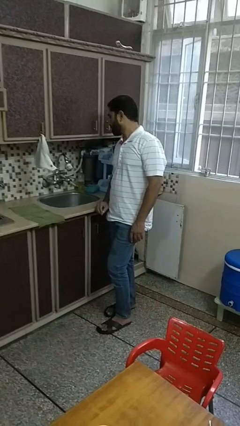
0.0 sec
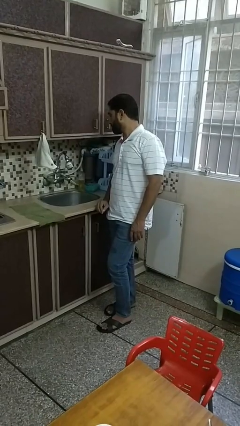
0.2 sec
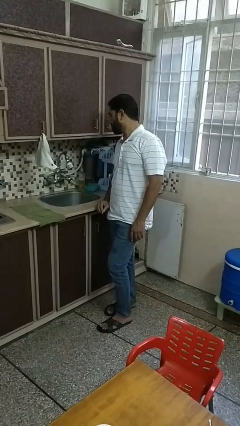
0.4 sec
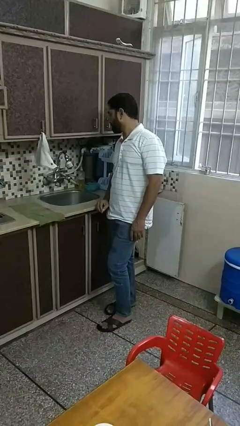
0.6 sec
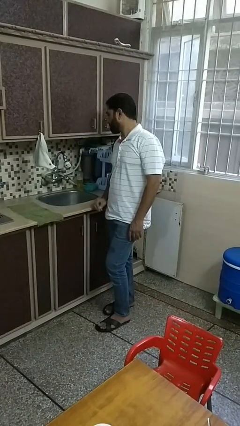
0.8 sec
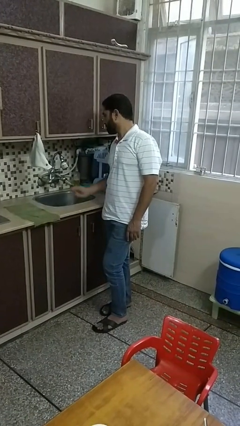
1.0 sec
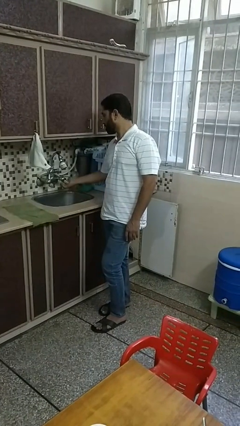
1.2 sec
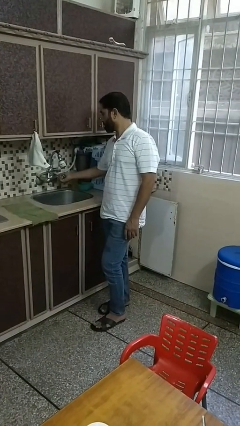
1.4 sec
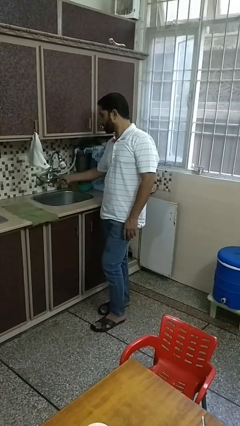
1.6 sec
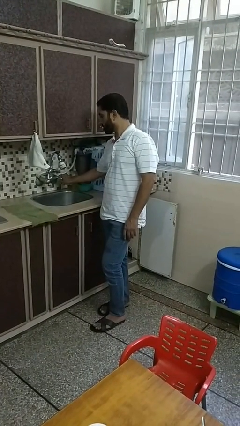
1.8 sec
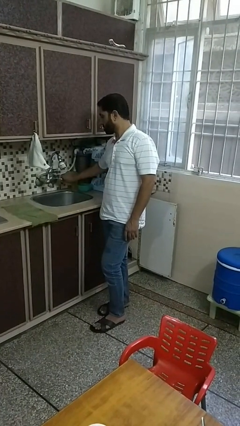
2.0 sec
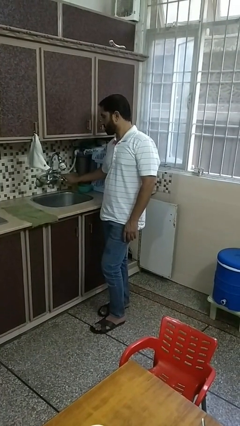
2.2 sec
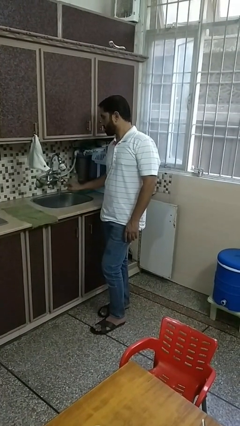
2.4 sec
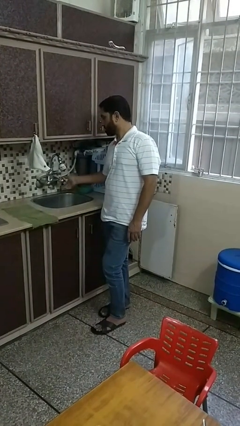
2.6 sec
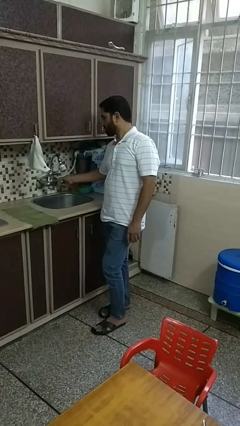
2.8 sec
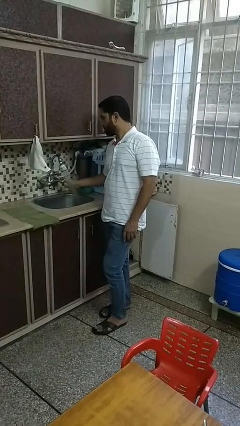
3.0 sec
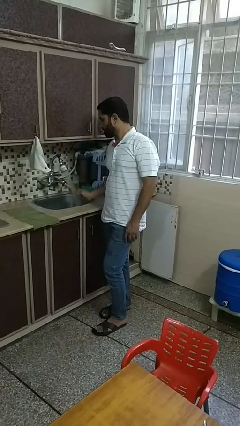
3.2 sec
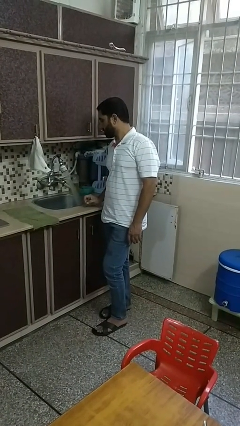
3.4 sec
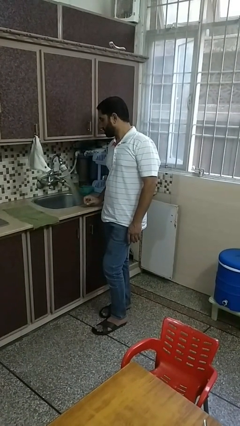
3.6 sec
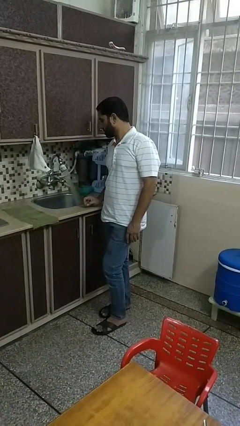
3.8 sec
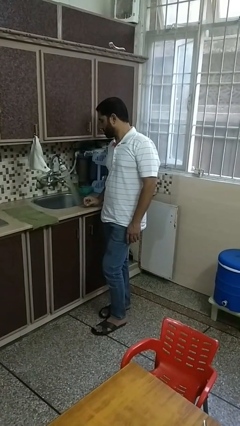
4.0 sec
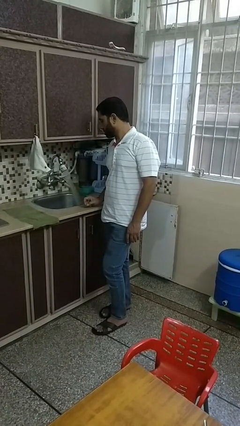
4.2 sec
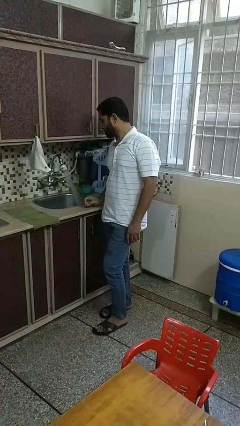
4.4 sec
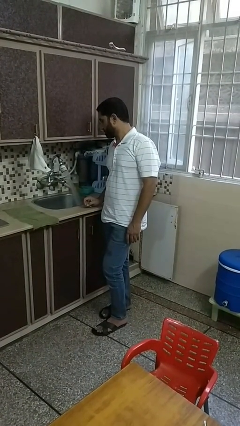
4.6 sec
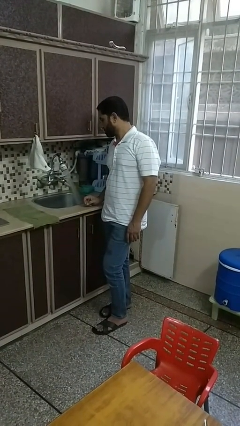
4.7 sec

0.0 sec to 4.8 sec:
person turns on faucet

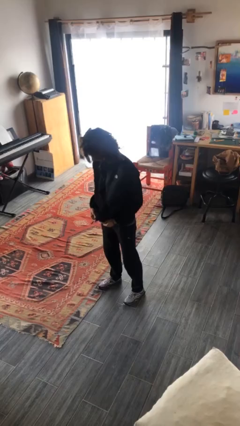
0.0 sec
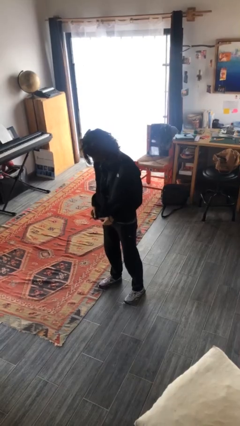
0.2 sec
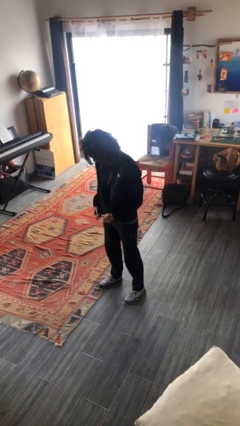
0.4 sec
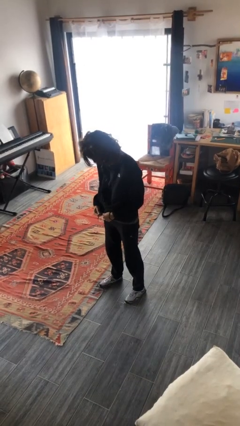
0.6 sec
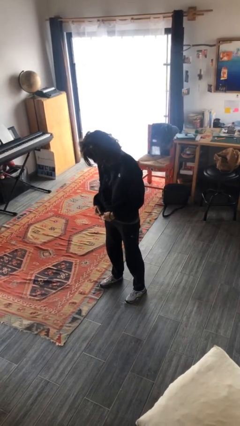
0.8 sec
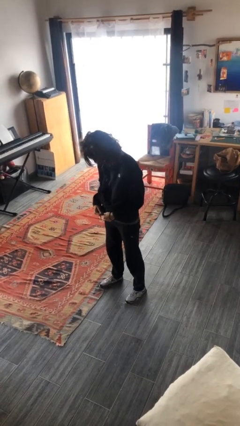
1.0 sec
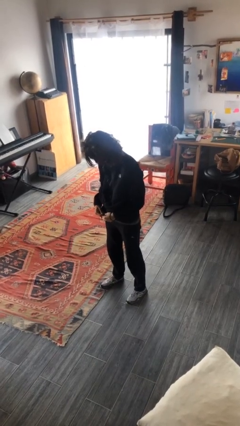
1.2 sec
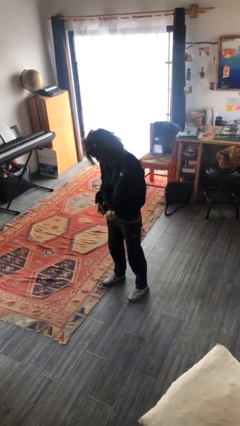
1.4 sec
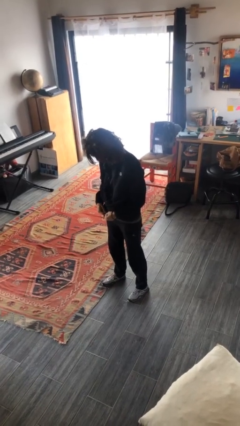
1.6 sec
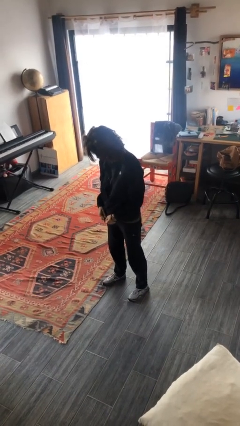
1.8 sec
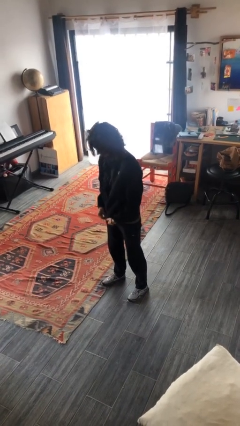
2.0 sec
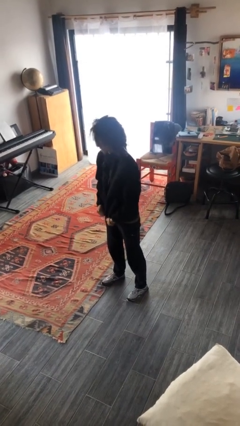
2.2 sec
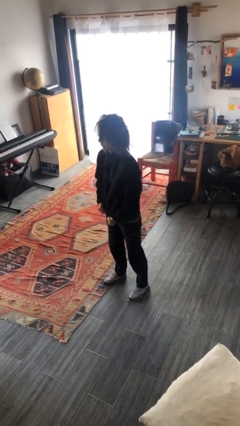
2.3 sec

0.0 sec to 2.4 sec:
person zips up jacket

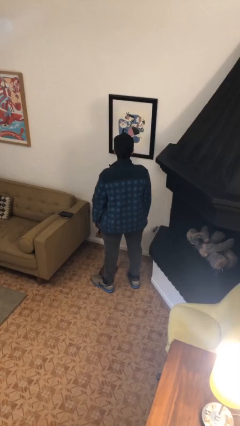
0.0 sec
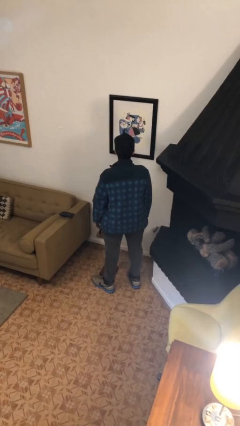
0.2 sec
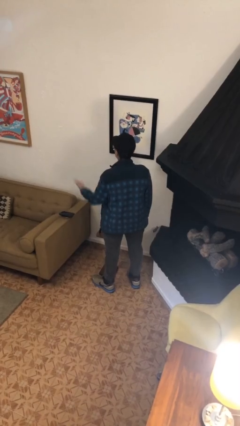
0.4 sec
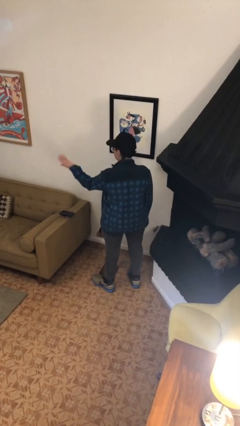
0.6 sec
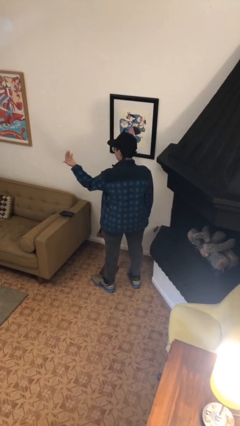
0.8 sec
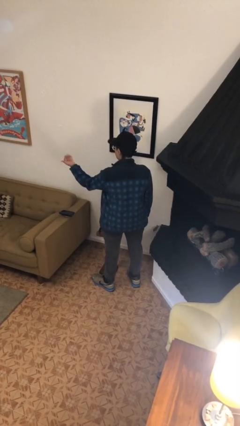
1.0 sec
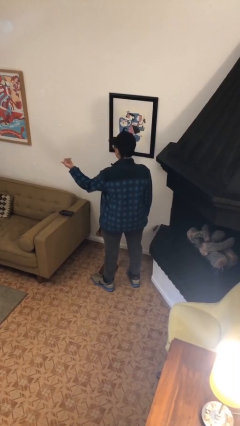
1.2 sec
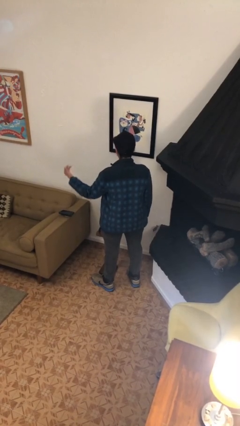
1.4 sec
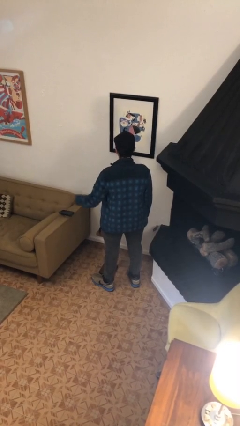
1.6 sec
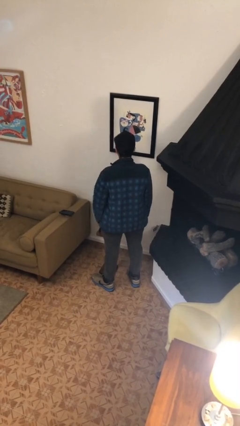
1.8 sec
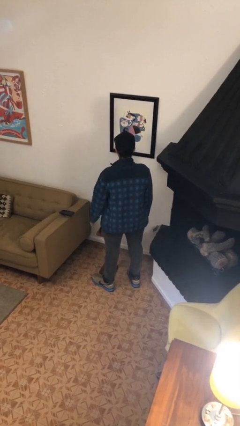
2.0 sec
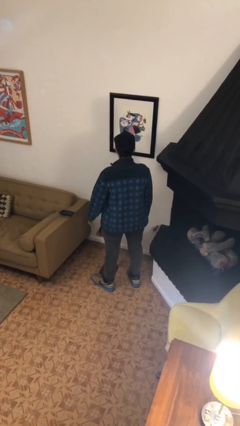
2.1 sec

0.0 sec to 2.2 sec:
person gestures come here

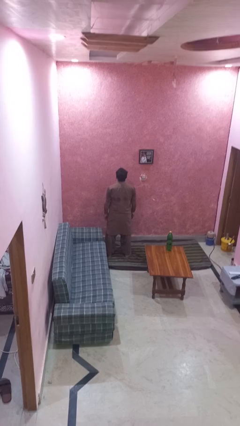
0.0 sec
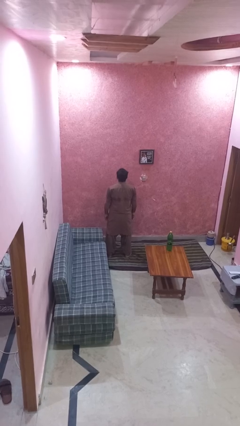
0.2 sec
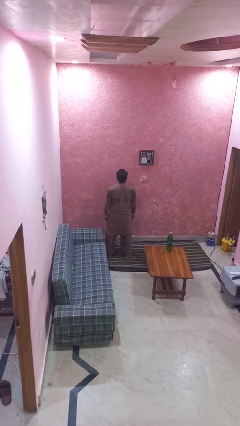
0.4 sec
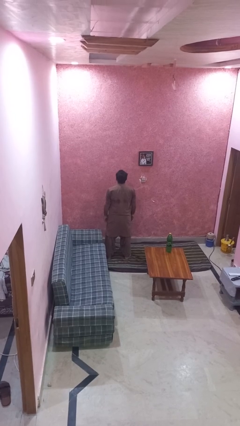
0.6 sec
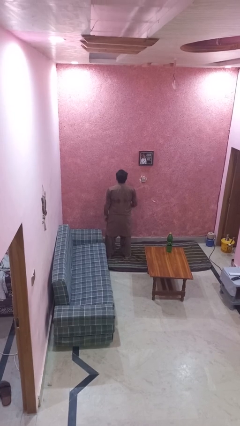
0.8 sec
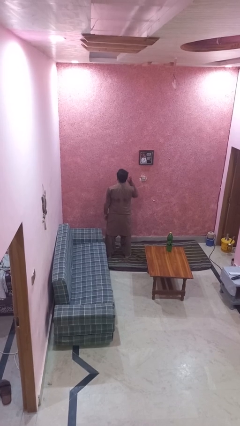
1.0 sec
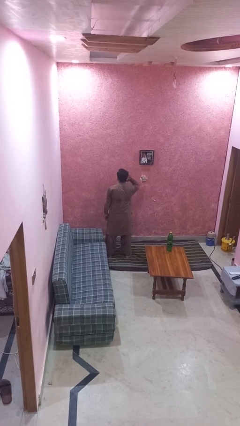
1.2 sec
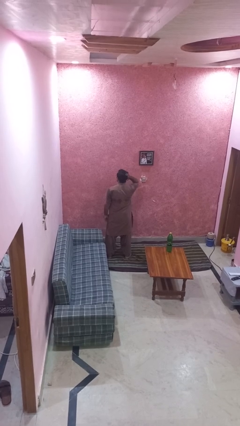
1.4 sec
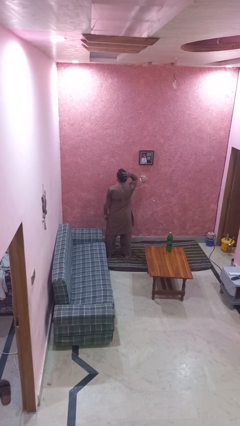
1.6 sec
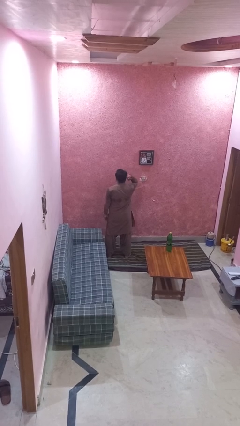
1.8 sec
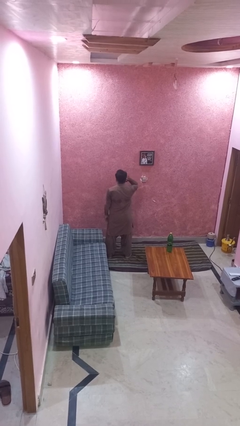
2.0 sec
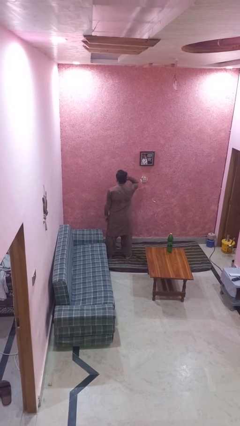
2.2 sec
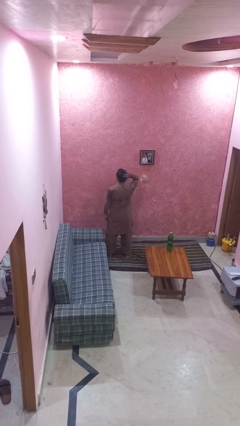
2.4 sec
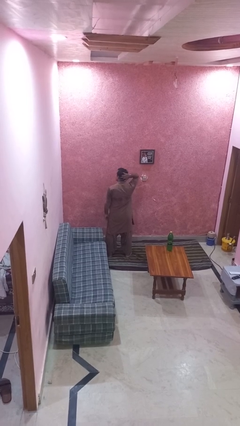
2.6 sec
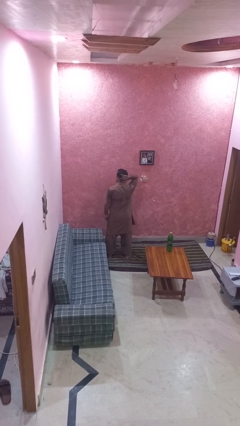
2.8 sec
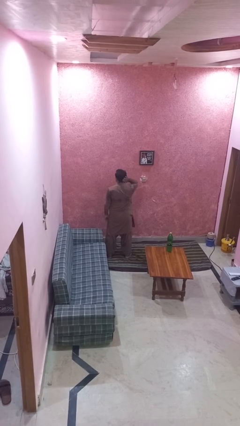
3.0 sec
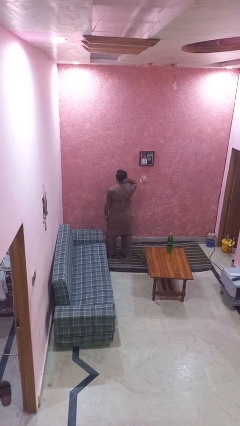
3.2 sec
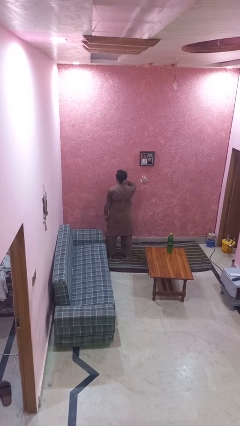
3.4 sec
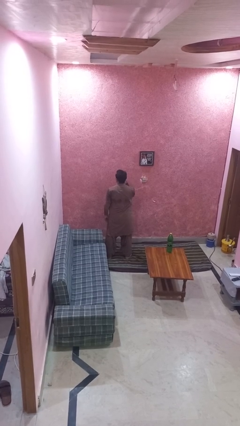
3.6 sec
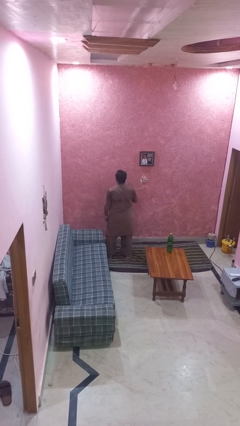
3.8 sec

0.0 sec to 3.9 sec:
person strokes hair

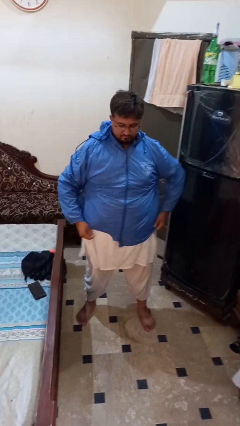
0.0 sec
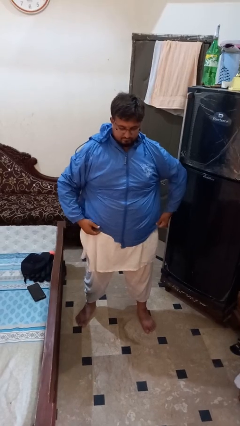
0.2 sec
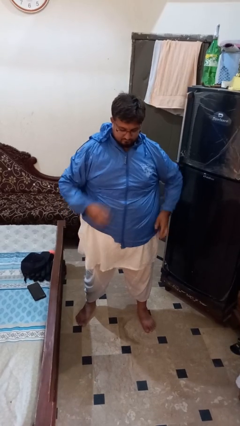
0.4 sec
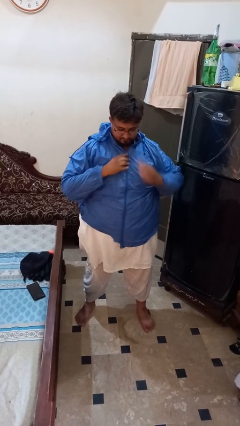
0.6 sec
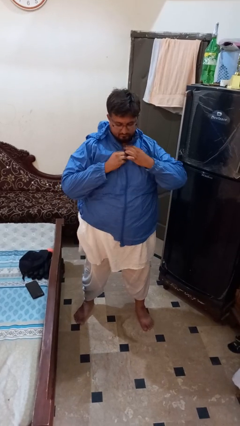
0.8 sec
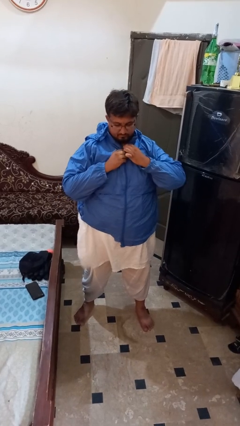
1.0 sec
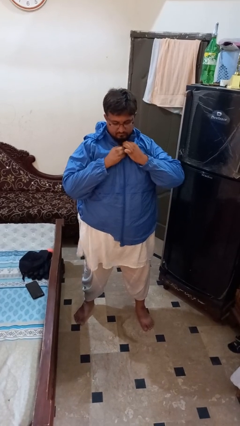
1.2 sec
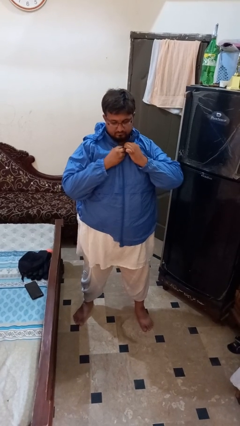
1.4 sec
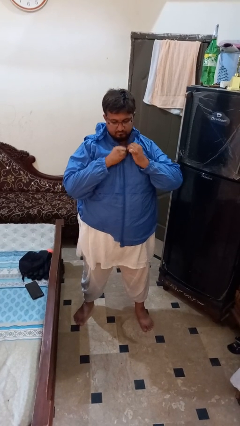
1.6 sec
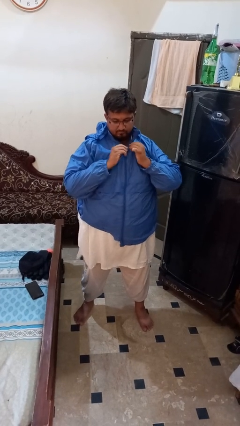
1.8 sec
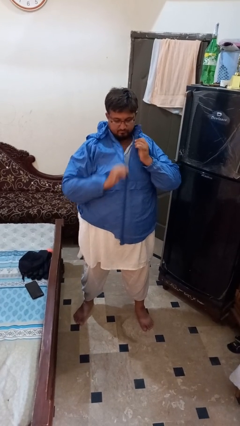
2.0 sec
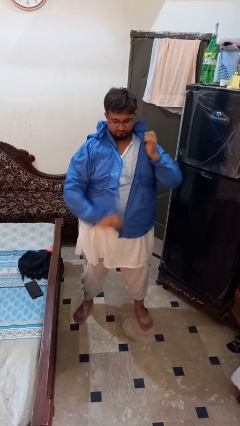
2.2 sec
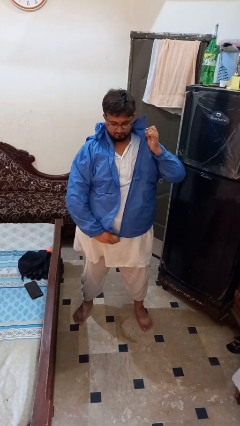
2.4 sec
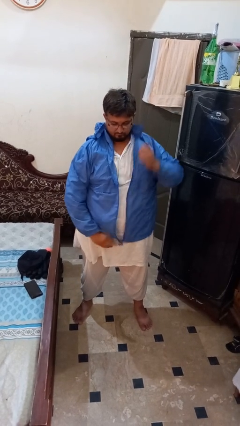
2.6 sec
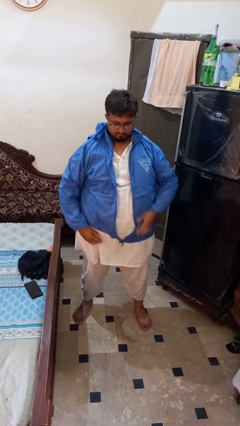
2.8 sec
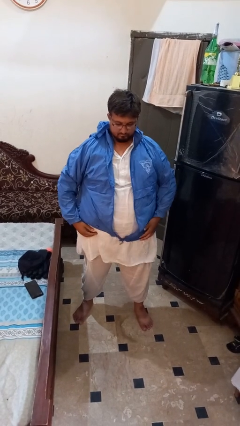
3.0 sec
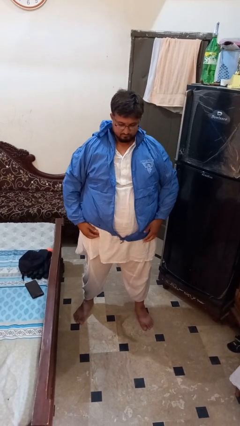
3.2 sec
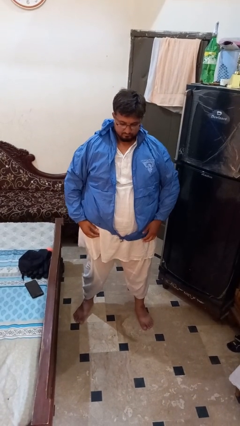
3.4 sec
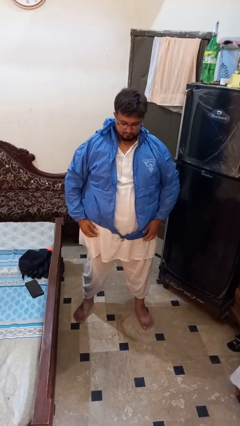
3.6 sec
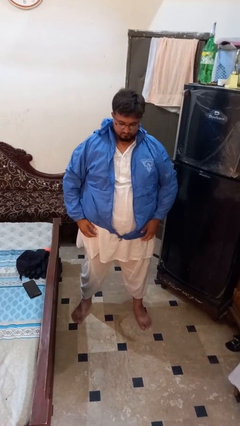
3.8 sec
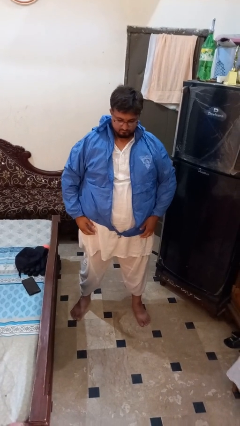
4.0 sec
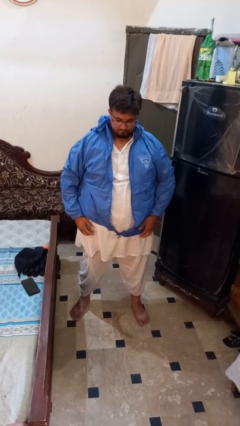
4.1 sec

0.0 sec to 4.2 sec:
person unzips jacket

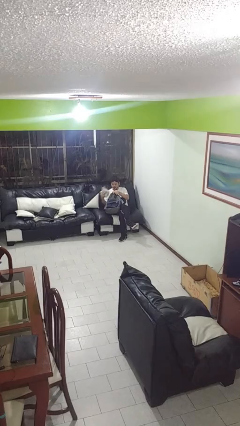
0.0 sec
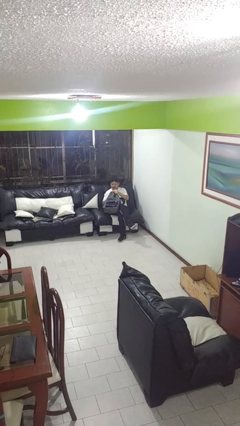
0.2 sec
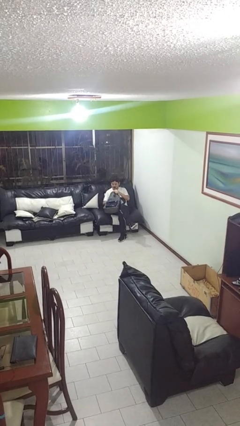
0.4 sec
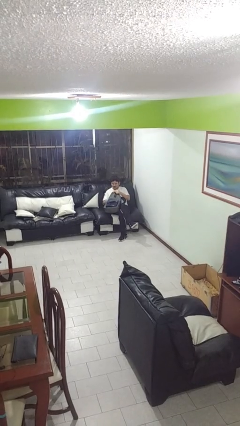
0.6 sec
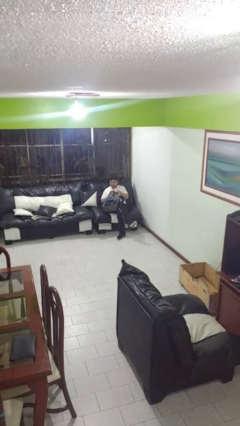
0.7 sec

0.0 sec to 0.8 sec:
person puts object into backpack
